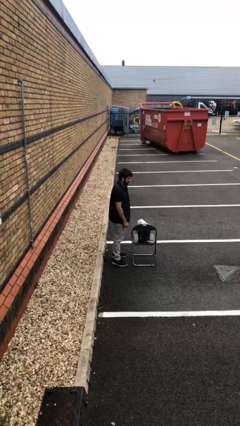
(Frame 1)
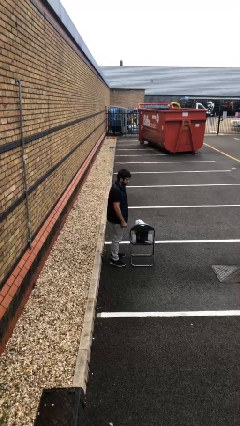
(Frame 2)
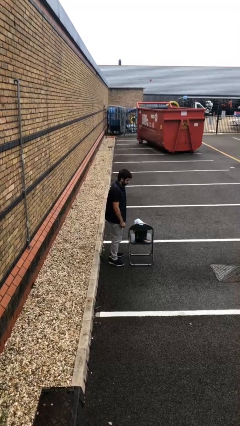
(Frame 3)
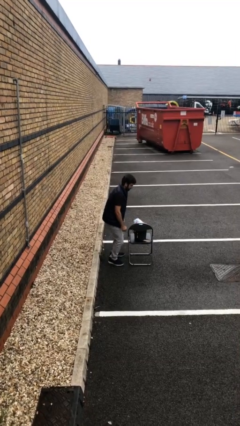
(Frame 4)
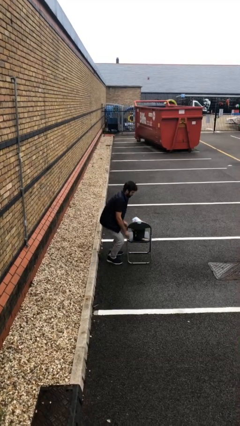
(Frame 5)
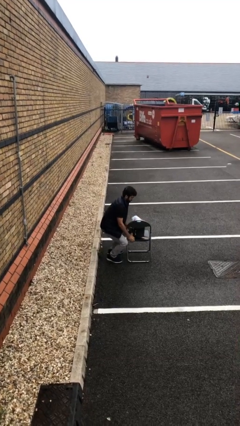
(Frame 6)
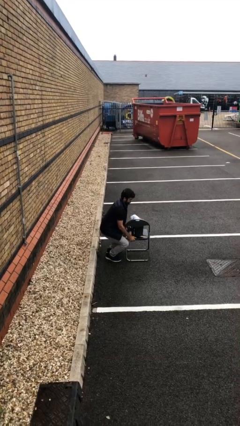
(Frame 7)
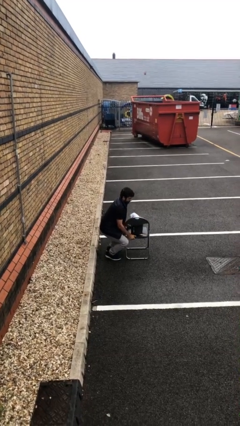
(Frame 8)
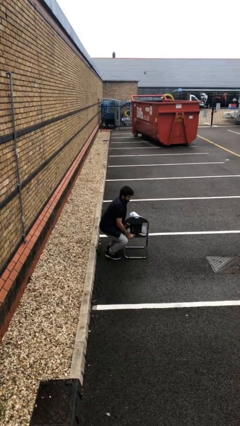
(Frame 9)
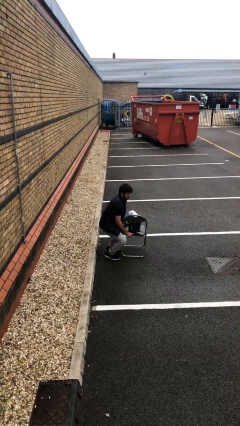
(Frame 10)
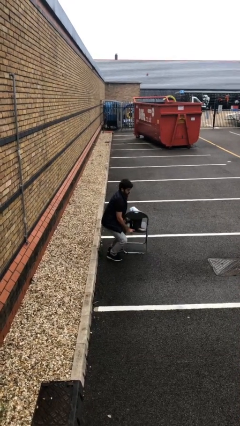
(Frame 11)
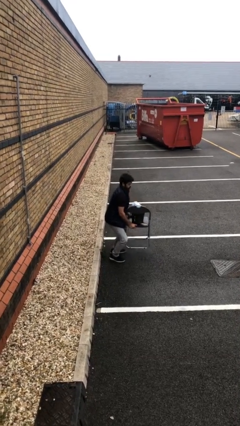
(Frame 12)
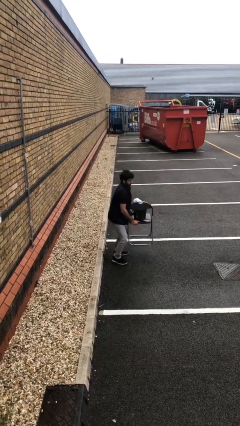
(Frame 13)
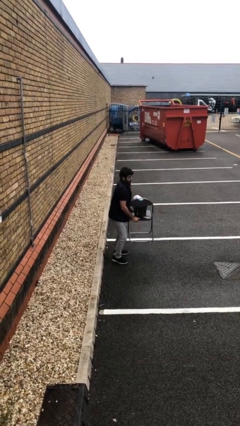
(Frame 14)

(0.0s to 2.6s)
person picks up object from floor

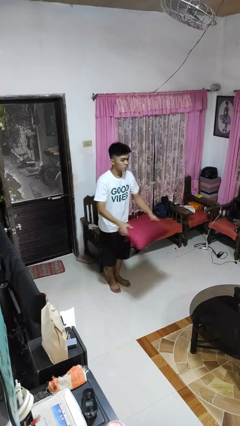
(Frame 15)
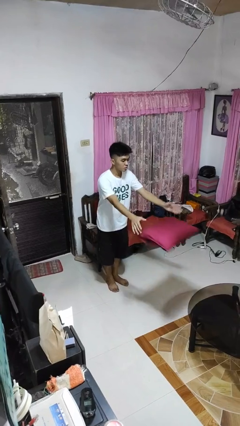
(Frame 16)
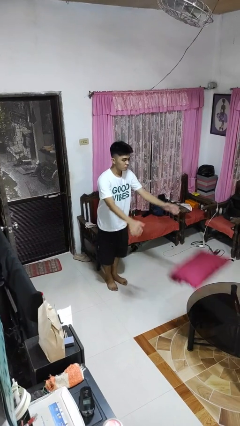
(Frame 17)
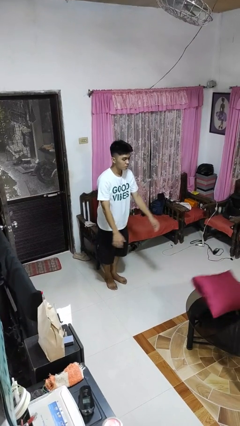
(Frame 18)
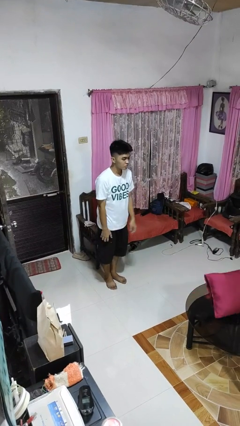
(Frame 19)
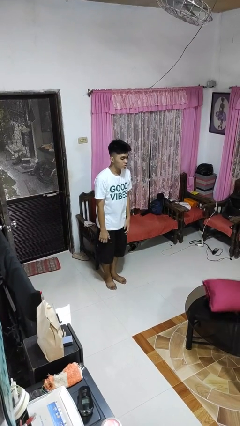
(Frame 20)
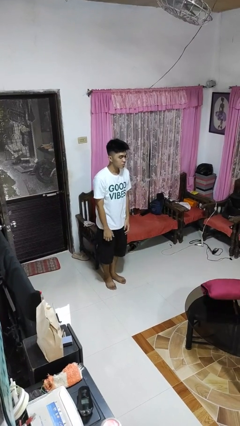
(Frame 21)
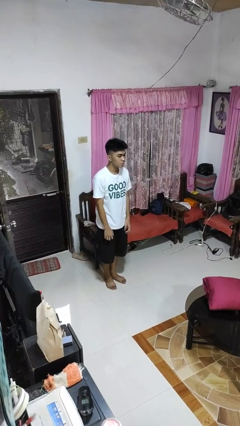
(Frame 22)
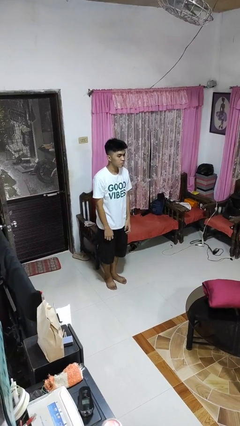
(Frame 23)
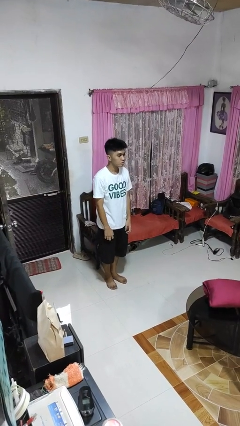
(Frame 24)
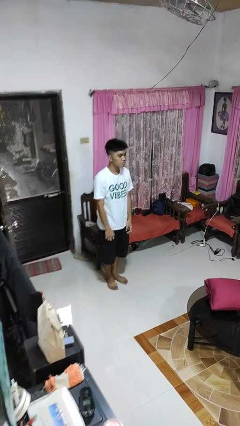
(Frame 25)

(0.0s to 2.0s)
person throws object on table

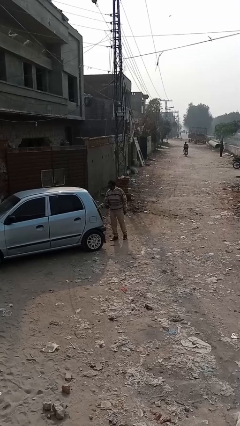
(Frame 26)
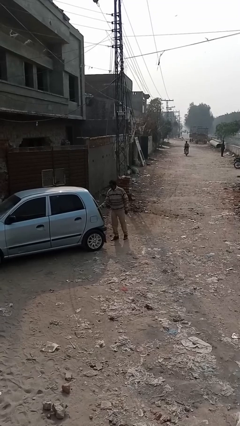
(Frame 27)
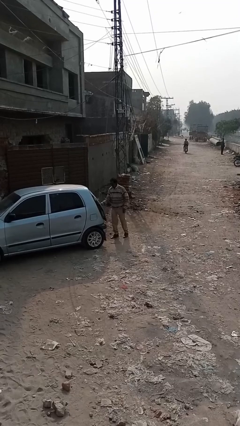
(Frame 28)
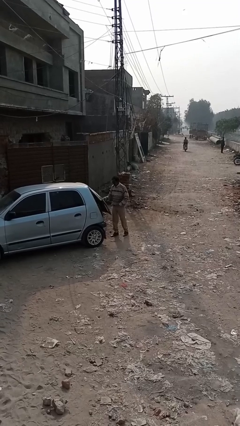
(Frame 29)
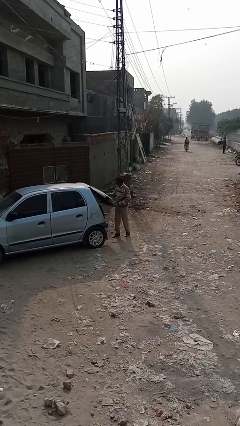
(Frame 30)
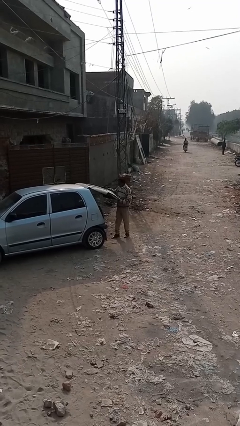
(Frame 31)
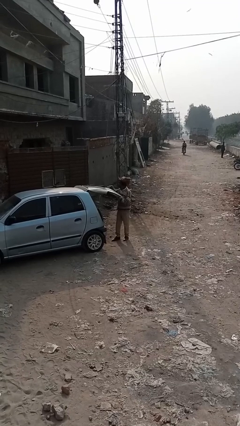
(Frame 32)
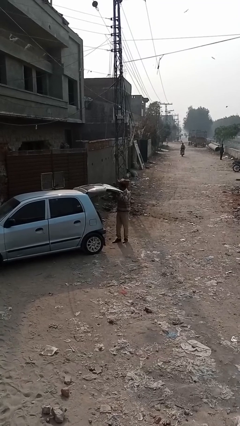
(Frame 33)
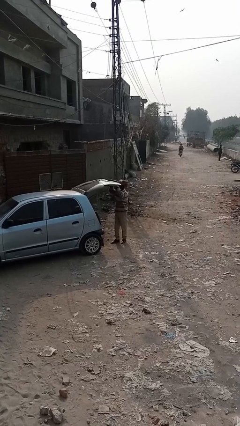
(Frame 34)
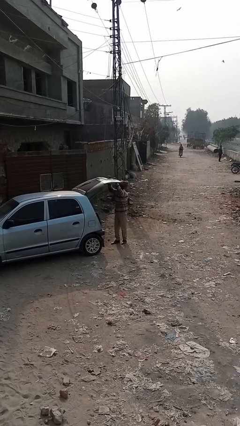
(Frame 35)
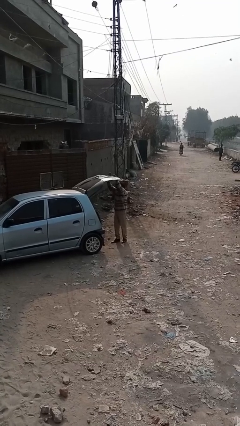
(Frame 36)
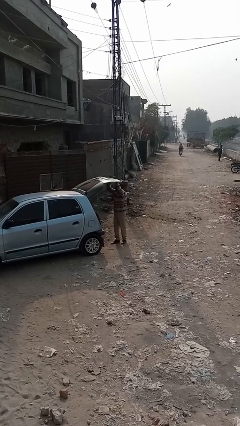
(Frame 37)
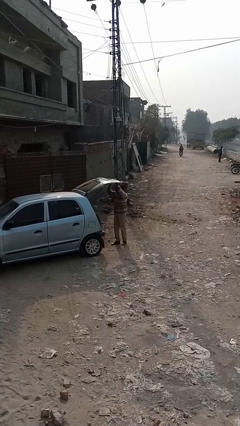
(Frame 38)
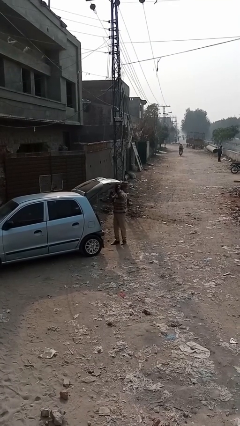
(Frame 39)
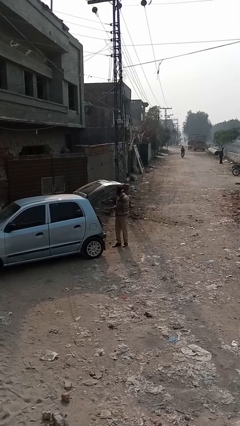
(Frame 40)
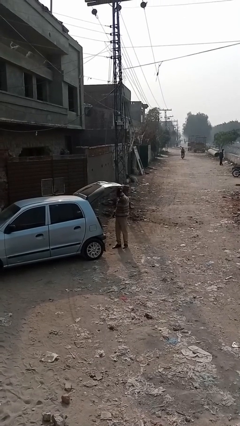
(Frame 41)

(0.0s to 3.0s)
person opens car trunk

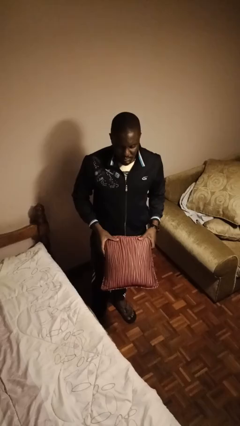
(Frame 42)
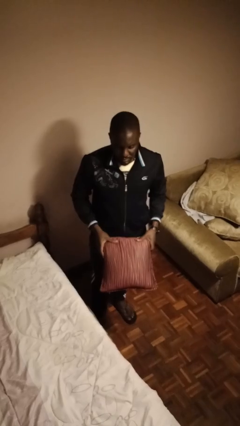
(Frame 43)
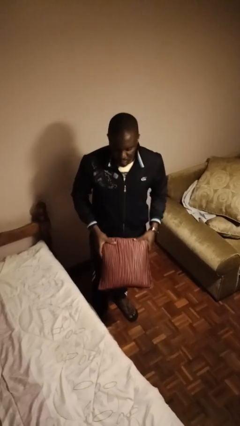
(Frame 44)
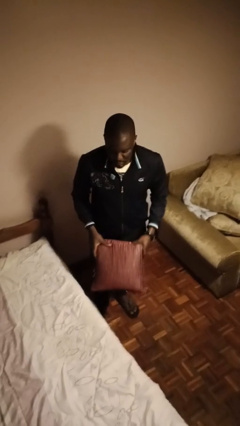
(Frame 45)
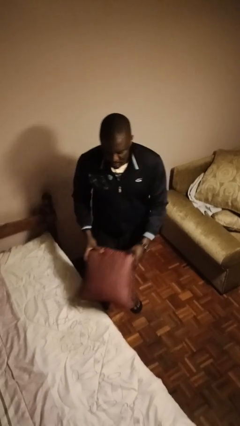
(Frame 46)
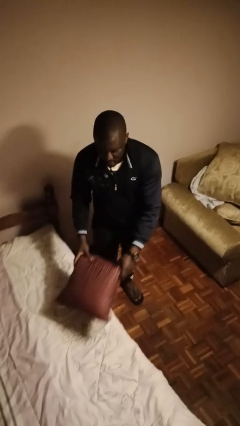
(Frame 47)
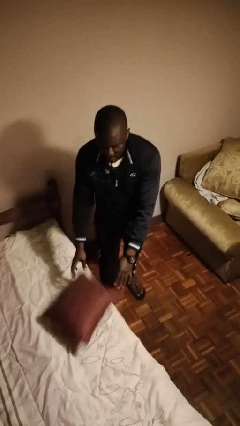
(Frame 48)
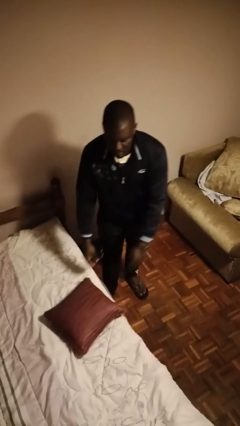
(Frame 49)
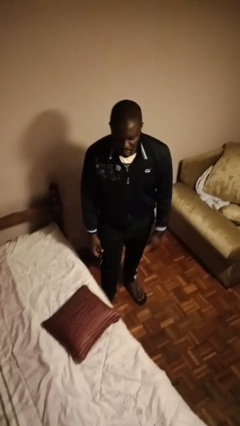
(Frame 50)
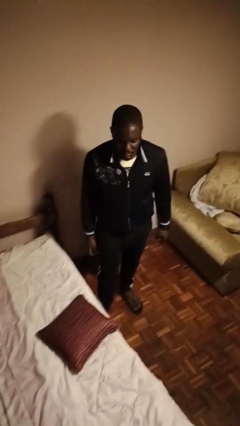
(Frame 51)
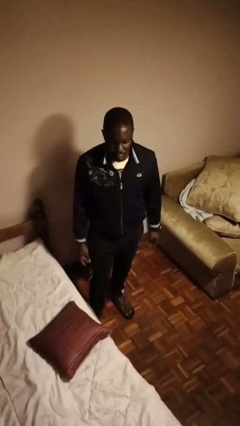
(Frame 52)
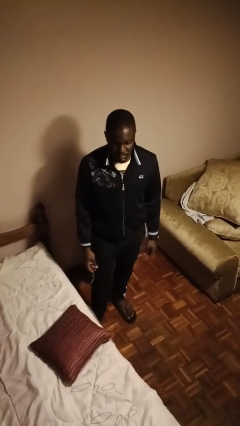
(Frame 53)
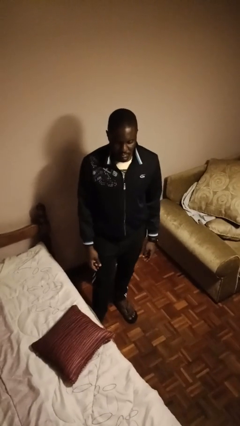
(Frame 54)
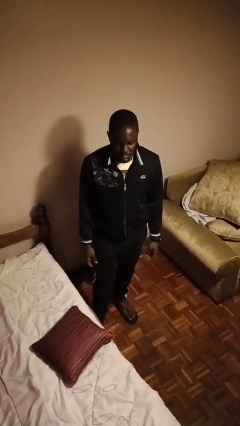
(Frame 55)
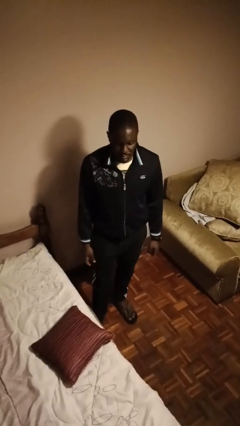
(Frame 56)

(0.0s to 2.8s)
person puts down object on bed

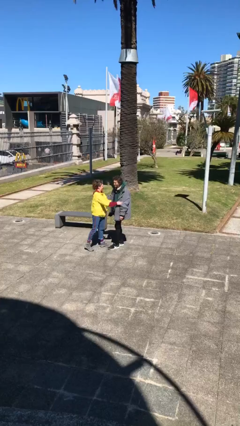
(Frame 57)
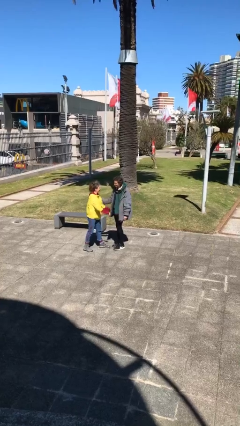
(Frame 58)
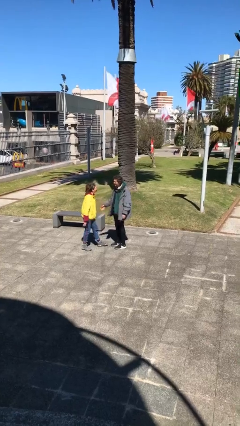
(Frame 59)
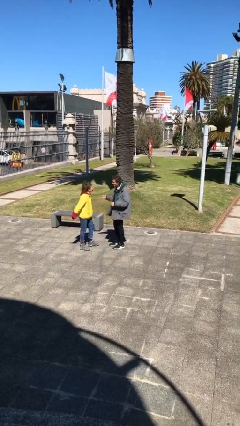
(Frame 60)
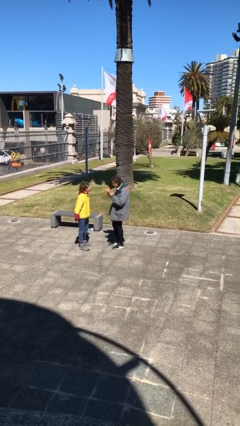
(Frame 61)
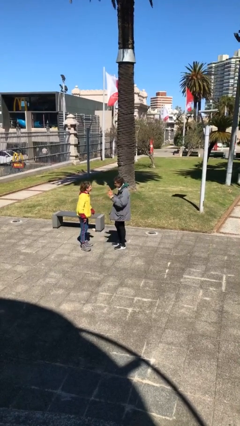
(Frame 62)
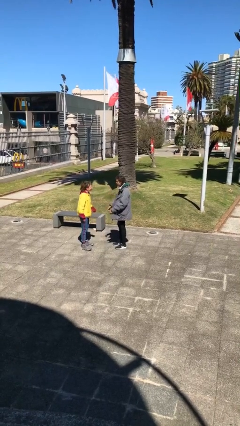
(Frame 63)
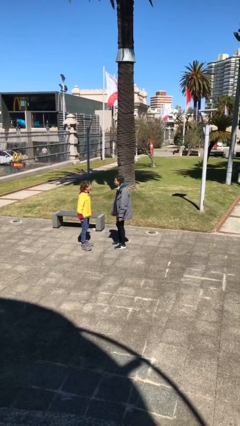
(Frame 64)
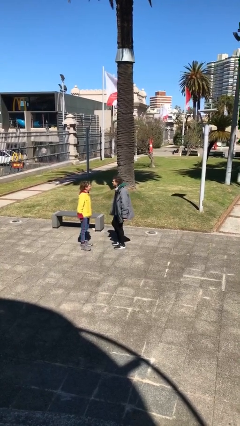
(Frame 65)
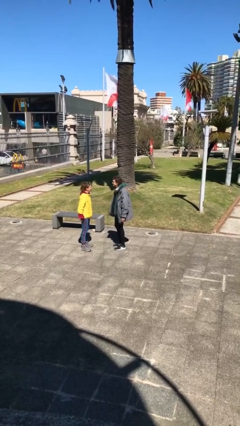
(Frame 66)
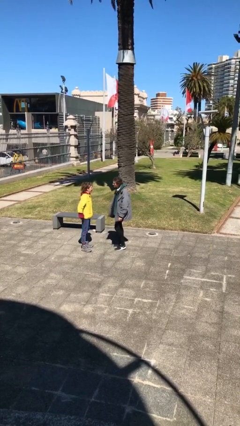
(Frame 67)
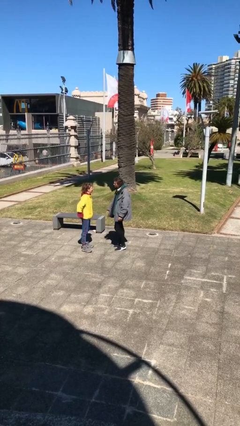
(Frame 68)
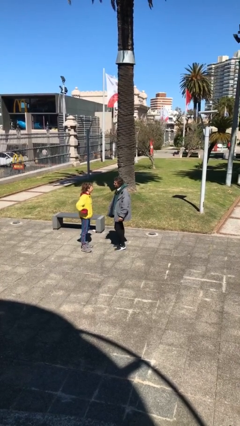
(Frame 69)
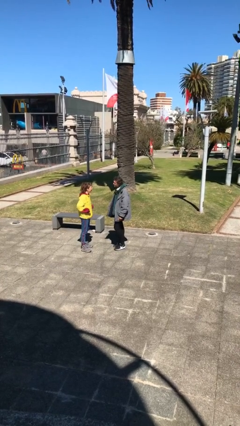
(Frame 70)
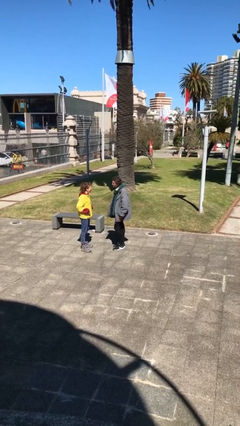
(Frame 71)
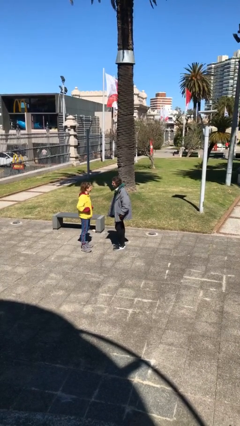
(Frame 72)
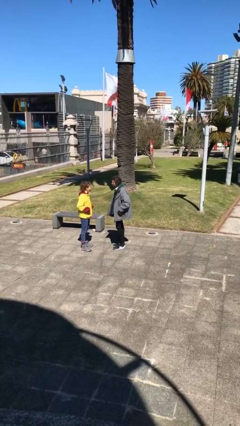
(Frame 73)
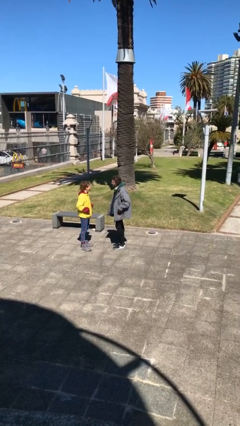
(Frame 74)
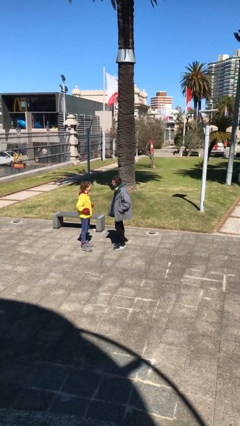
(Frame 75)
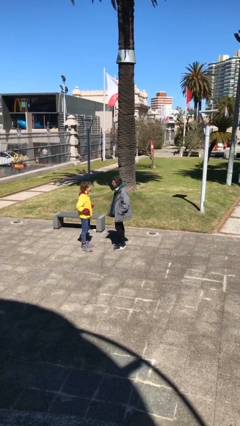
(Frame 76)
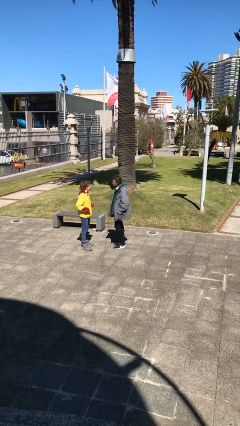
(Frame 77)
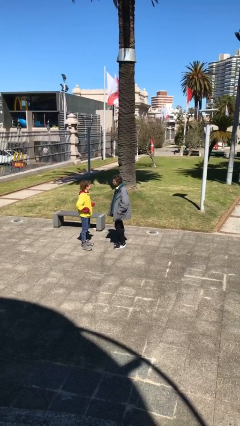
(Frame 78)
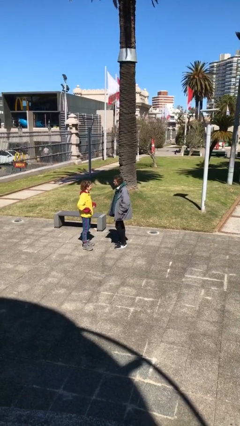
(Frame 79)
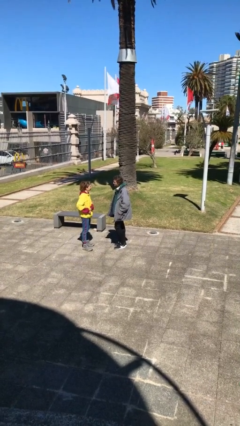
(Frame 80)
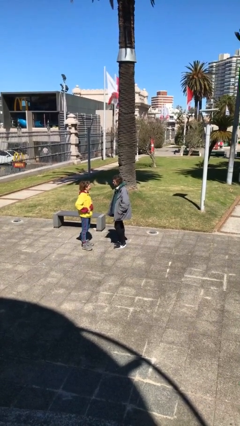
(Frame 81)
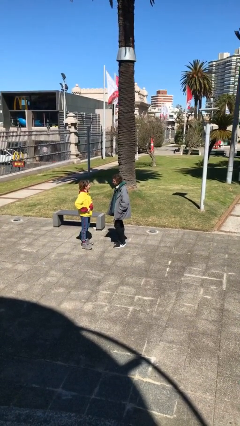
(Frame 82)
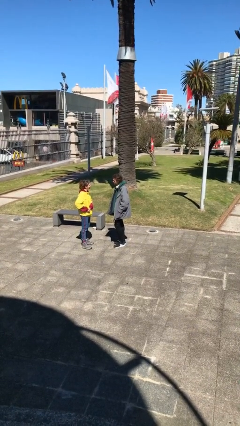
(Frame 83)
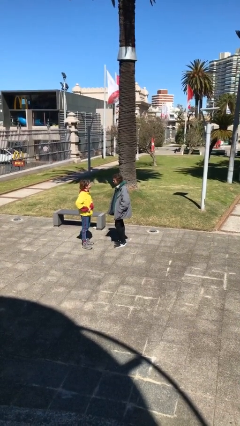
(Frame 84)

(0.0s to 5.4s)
person talks to person

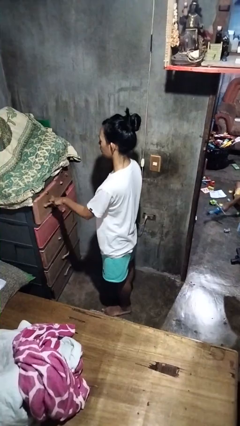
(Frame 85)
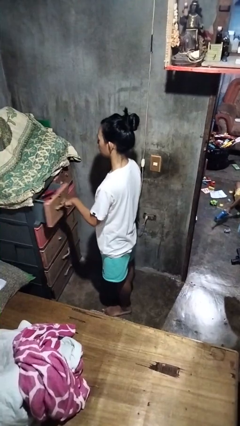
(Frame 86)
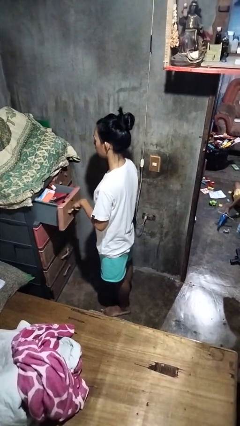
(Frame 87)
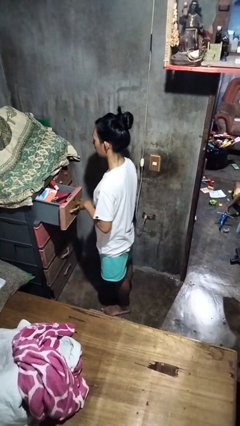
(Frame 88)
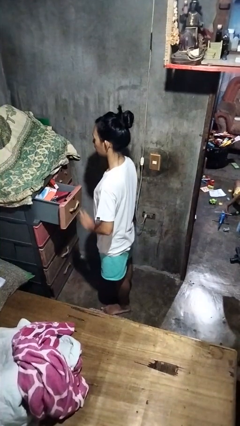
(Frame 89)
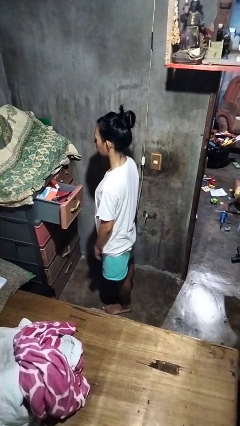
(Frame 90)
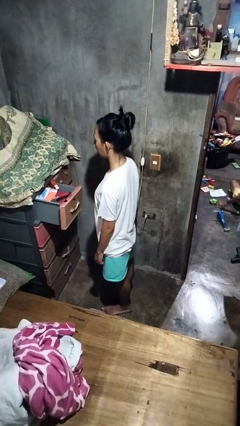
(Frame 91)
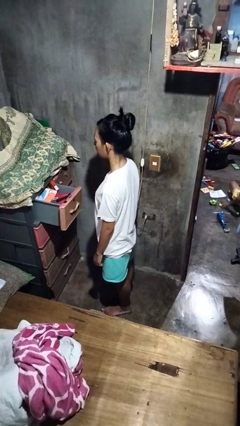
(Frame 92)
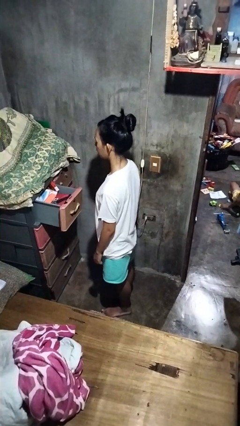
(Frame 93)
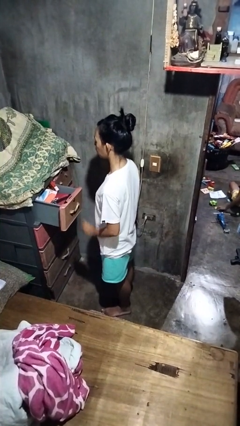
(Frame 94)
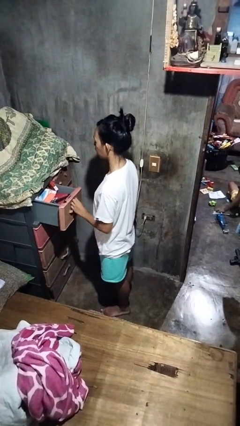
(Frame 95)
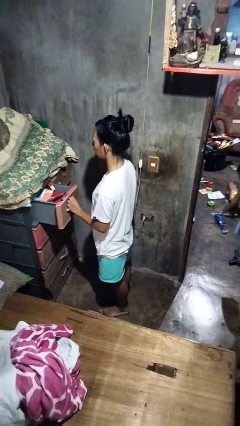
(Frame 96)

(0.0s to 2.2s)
person opens dresser drawer
